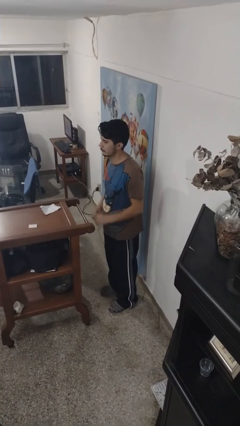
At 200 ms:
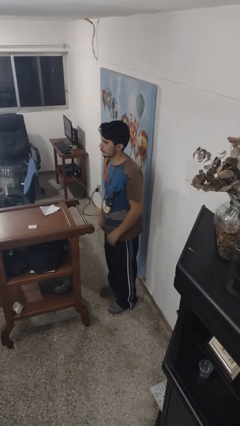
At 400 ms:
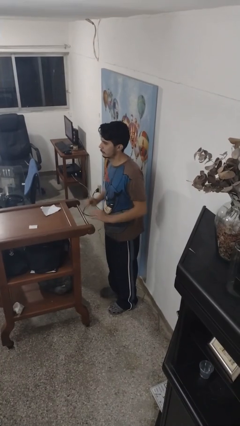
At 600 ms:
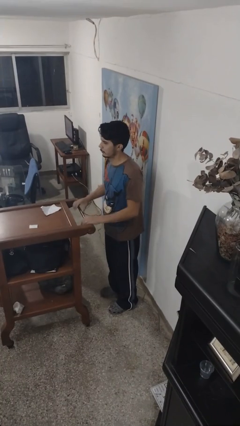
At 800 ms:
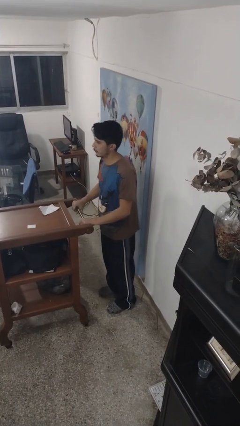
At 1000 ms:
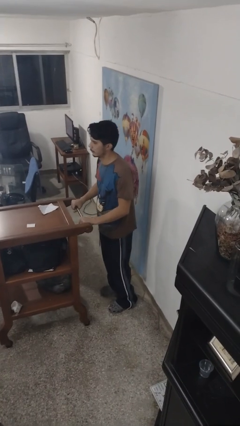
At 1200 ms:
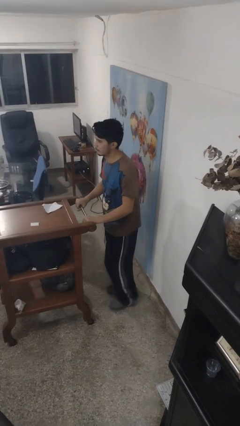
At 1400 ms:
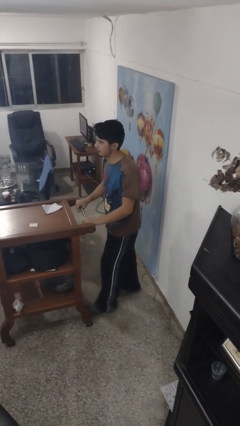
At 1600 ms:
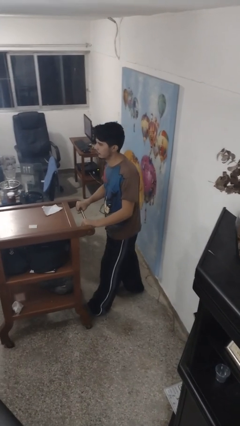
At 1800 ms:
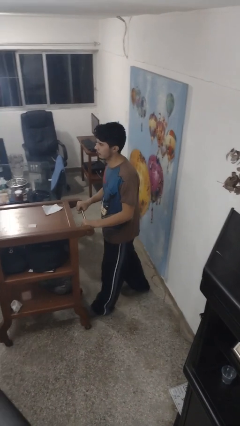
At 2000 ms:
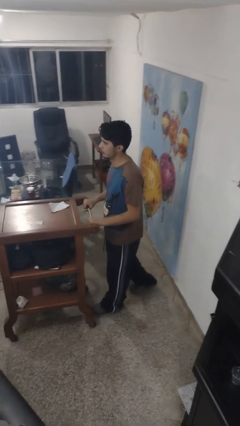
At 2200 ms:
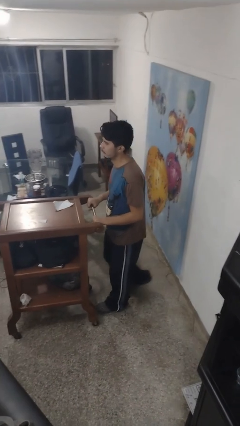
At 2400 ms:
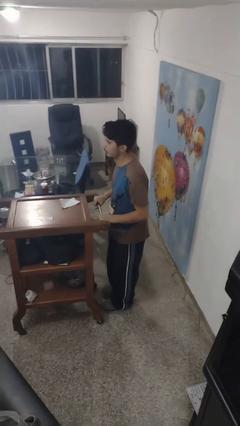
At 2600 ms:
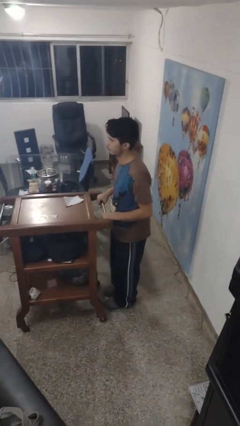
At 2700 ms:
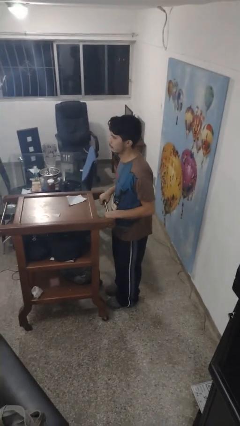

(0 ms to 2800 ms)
person pushes wheeled cart

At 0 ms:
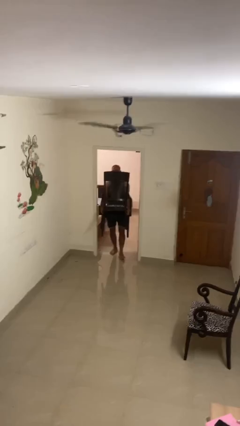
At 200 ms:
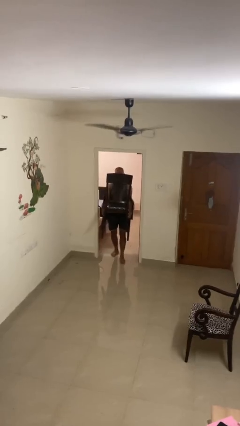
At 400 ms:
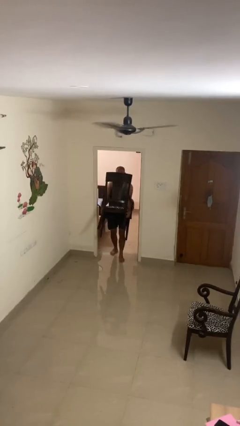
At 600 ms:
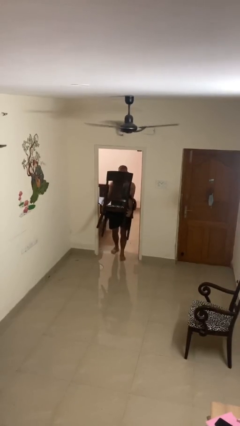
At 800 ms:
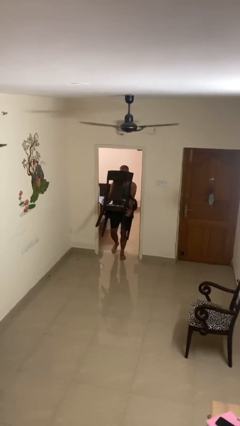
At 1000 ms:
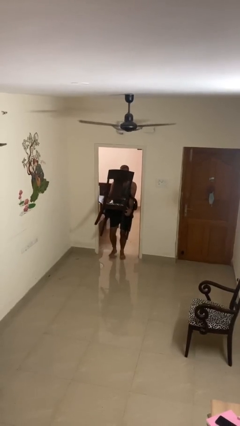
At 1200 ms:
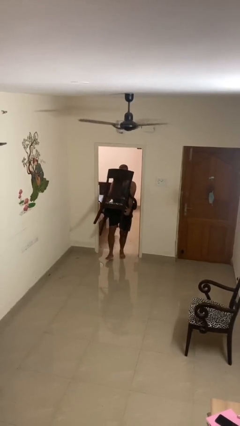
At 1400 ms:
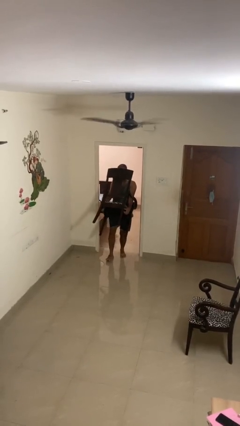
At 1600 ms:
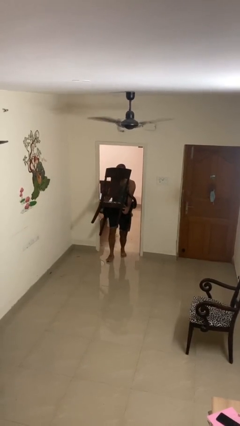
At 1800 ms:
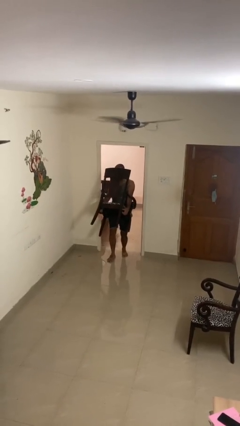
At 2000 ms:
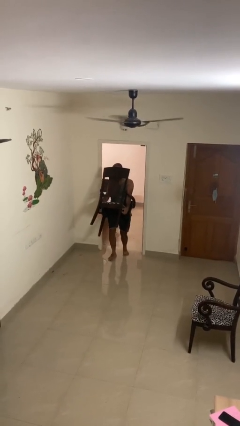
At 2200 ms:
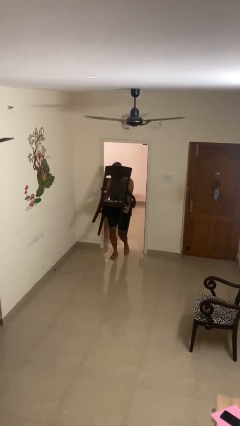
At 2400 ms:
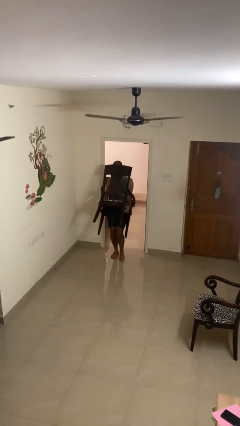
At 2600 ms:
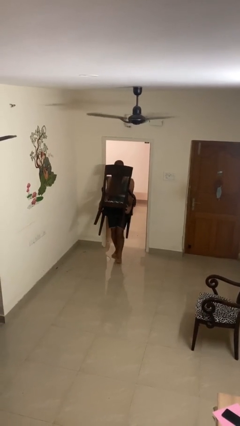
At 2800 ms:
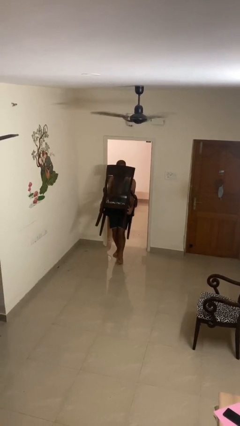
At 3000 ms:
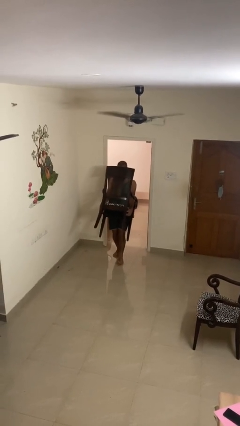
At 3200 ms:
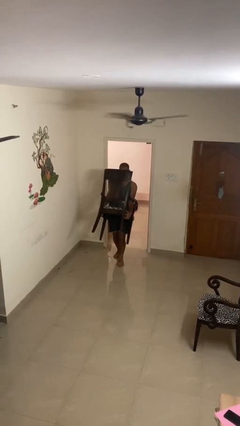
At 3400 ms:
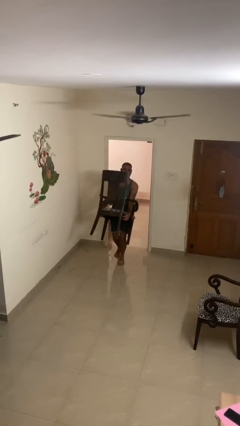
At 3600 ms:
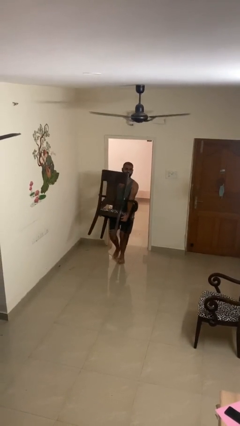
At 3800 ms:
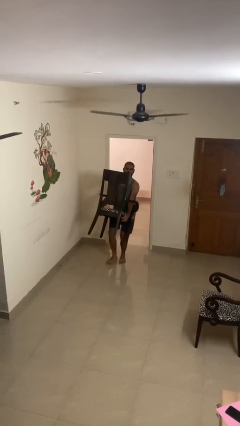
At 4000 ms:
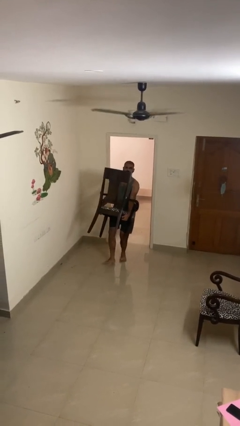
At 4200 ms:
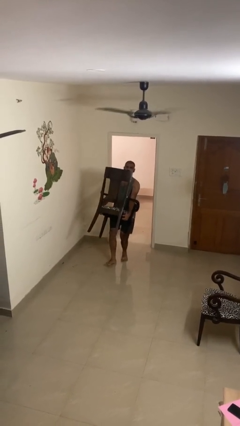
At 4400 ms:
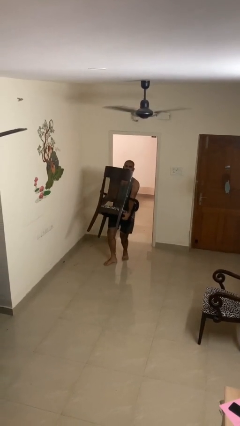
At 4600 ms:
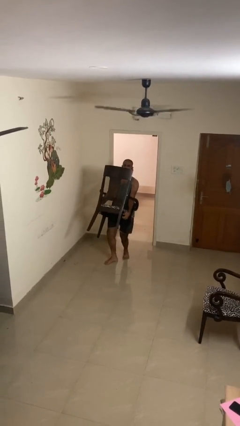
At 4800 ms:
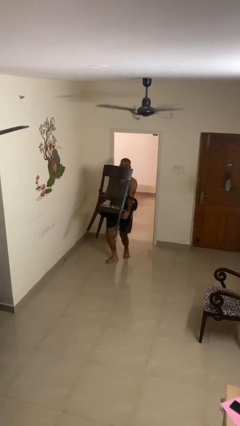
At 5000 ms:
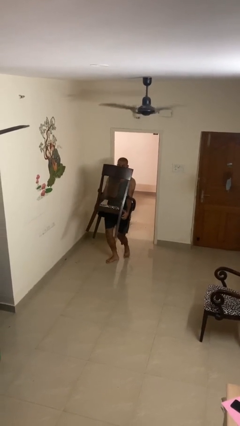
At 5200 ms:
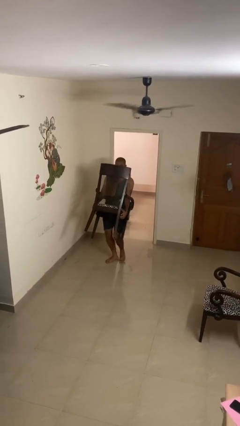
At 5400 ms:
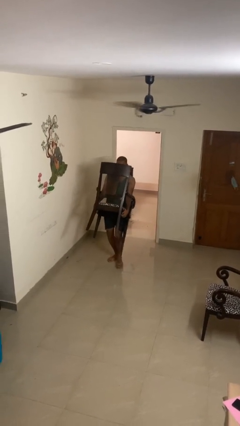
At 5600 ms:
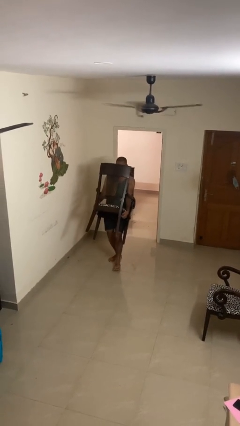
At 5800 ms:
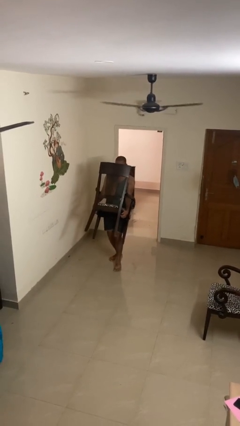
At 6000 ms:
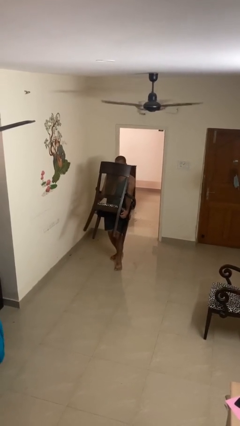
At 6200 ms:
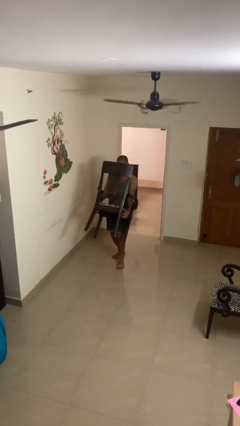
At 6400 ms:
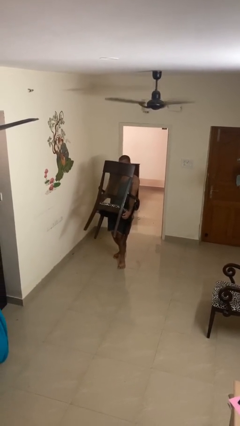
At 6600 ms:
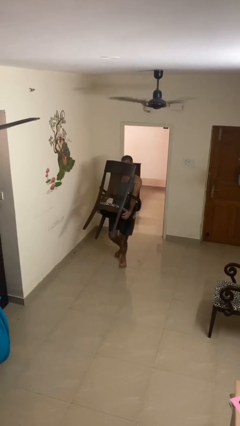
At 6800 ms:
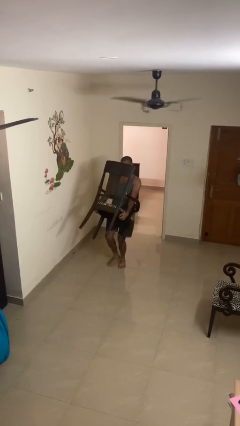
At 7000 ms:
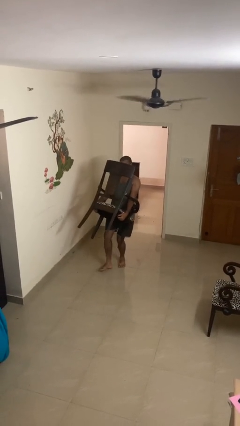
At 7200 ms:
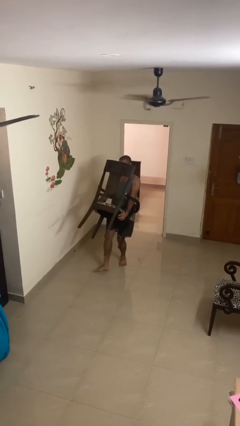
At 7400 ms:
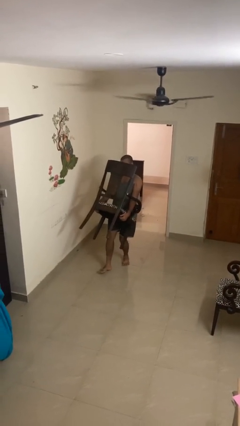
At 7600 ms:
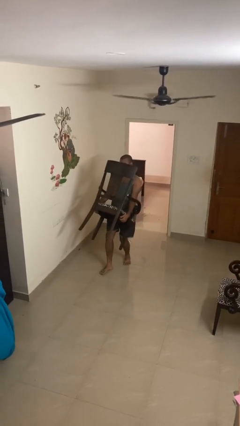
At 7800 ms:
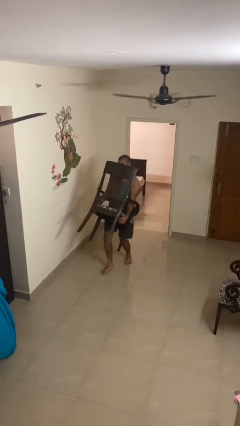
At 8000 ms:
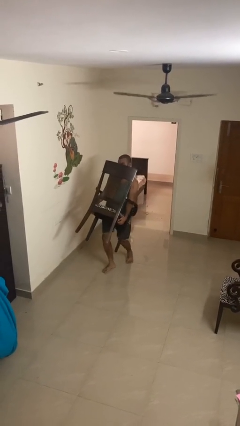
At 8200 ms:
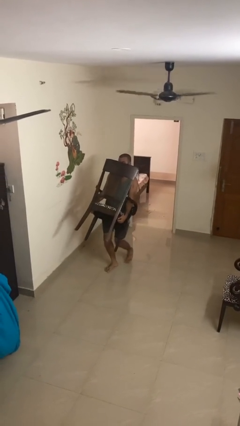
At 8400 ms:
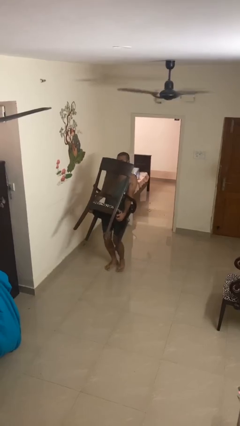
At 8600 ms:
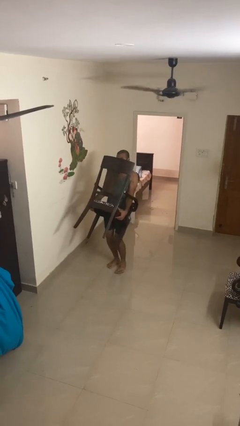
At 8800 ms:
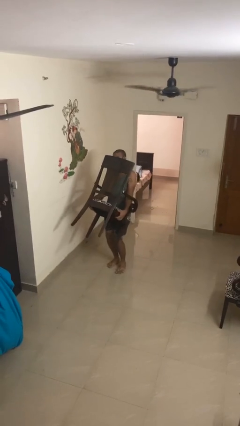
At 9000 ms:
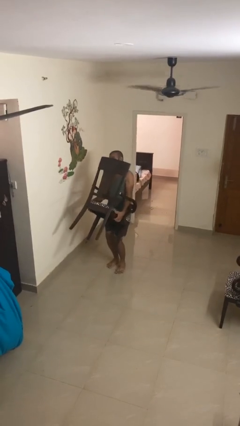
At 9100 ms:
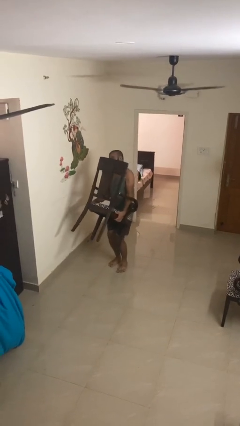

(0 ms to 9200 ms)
person carries heavy object

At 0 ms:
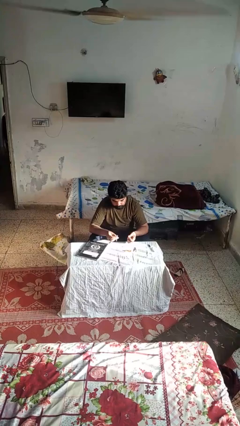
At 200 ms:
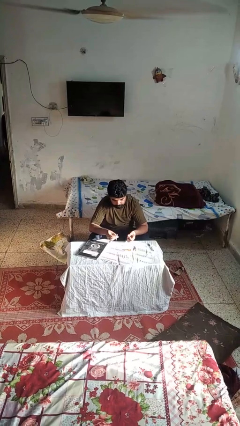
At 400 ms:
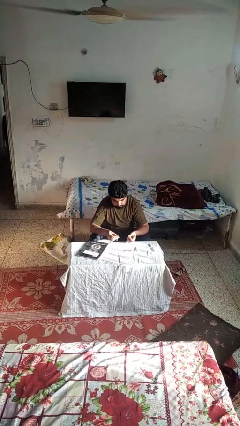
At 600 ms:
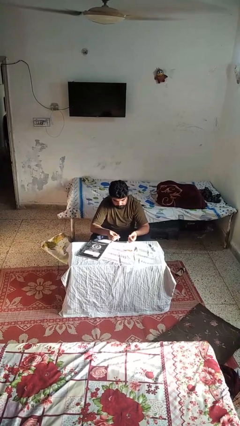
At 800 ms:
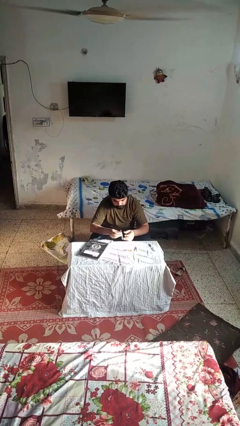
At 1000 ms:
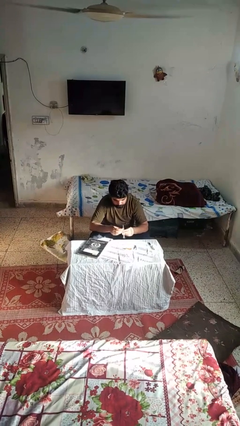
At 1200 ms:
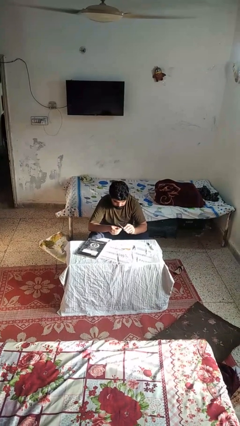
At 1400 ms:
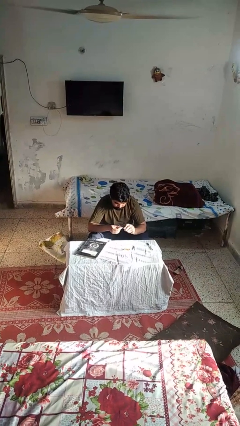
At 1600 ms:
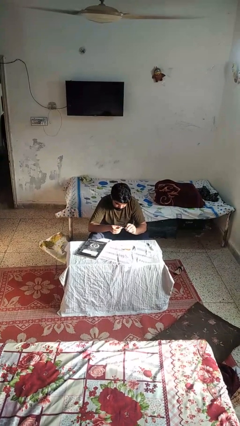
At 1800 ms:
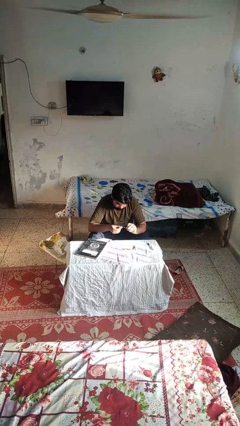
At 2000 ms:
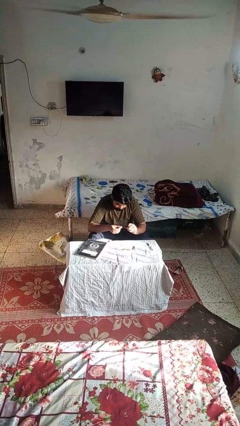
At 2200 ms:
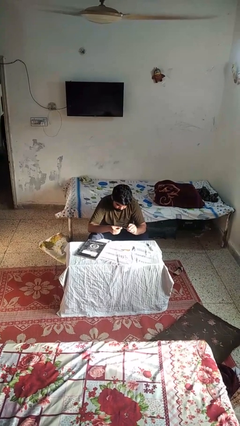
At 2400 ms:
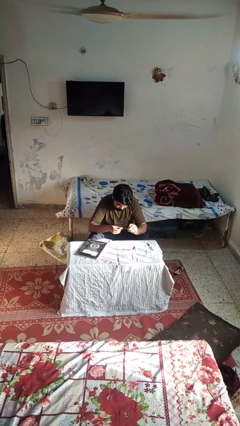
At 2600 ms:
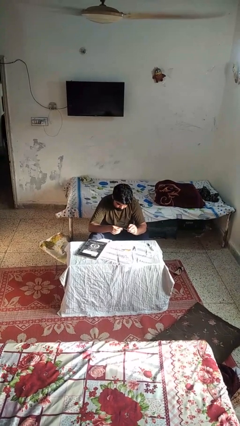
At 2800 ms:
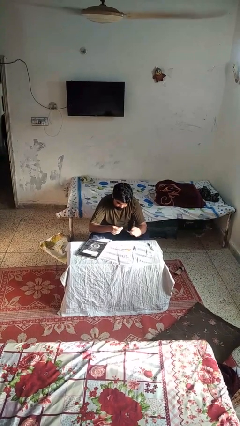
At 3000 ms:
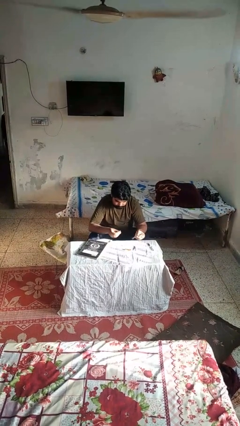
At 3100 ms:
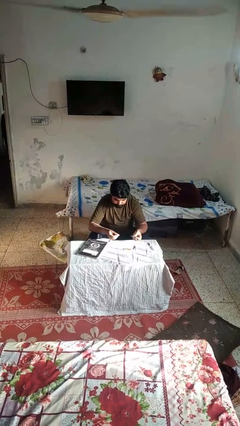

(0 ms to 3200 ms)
person files fingernails

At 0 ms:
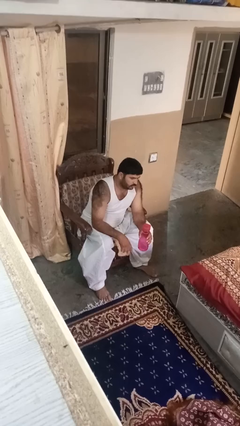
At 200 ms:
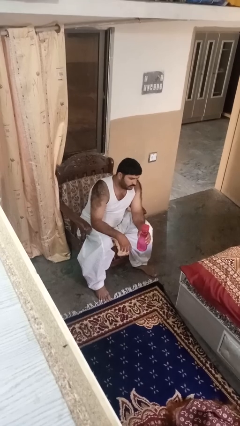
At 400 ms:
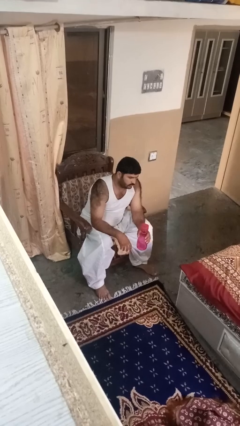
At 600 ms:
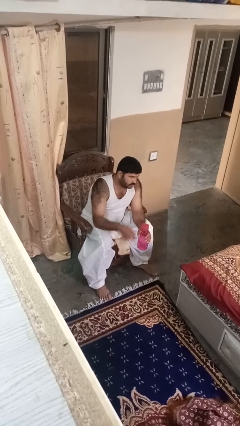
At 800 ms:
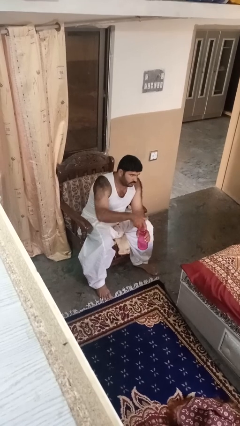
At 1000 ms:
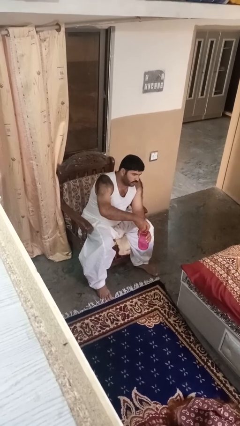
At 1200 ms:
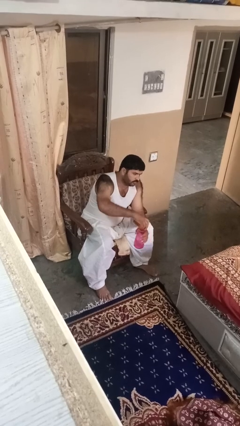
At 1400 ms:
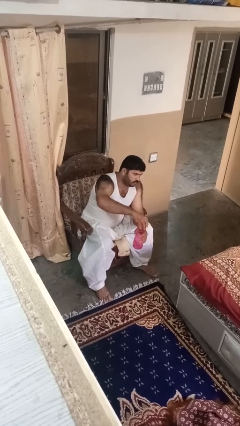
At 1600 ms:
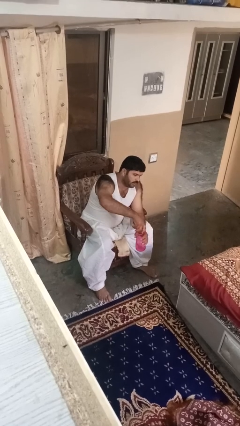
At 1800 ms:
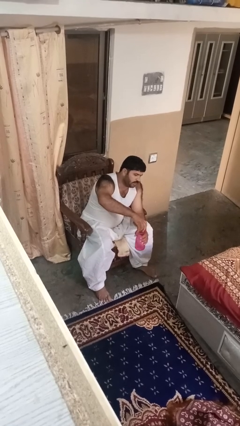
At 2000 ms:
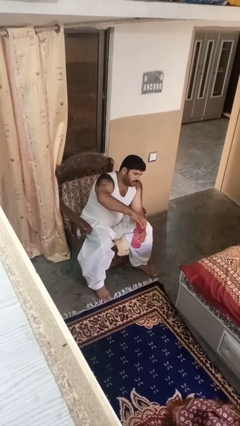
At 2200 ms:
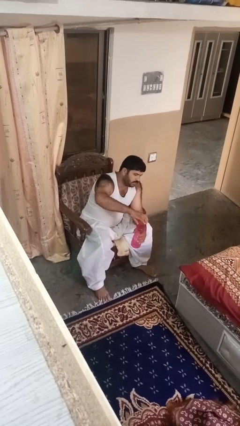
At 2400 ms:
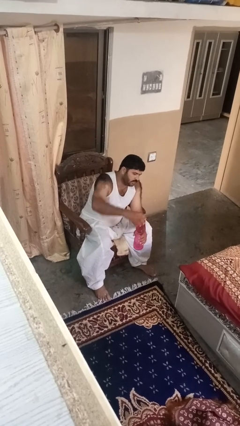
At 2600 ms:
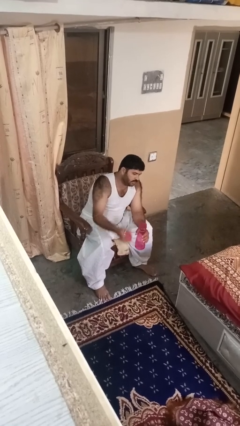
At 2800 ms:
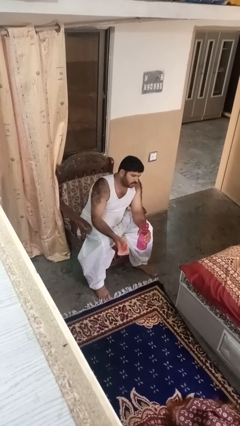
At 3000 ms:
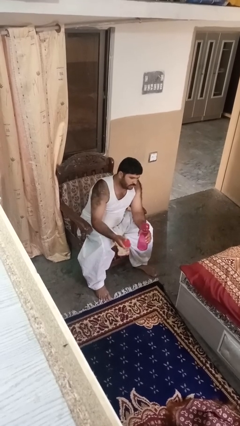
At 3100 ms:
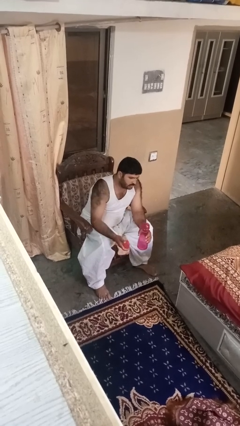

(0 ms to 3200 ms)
person unscrews lid from bottle
